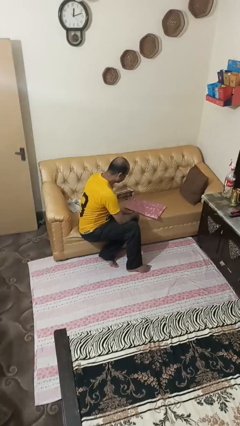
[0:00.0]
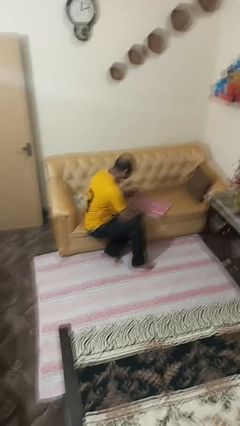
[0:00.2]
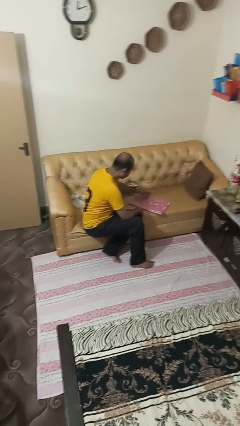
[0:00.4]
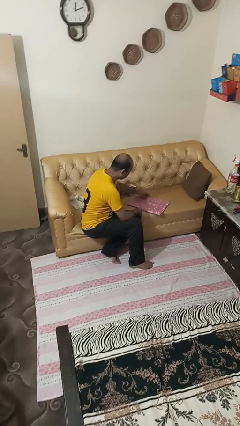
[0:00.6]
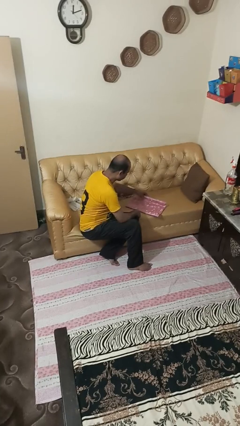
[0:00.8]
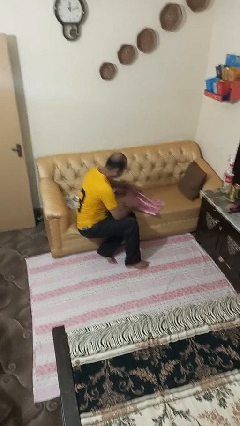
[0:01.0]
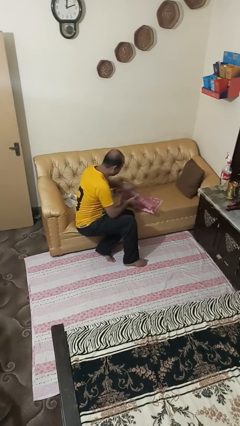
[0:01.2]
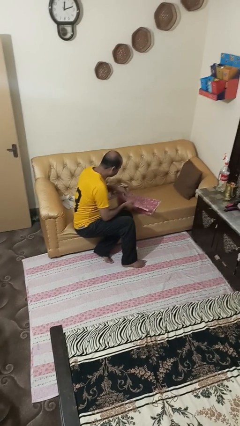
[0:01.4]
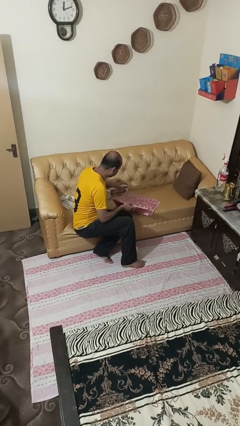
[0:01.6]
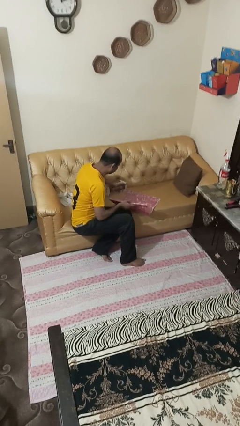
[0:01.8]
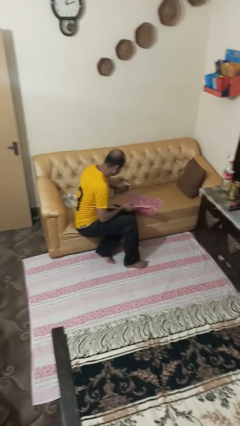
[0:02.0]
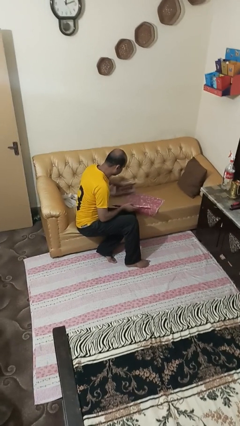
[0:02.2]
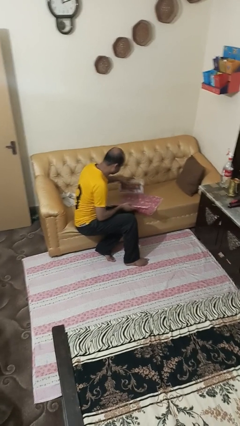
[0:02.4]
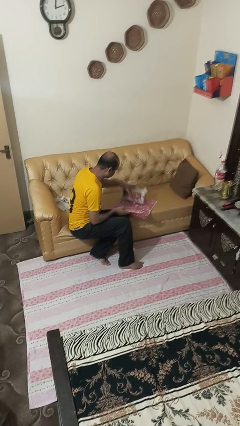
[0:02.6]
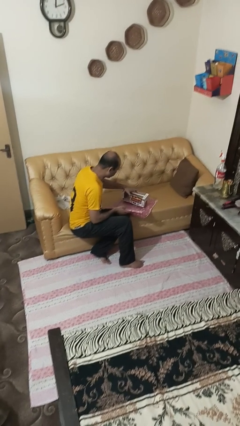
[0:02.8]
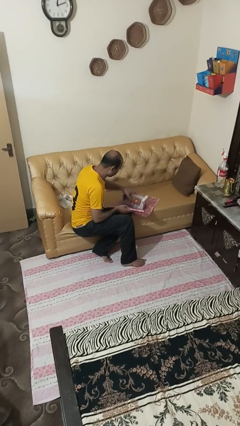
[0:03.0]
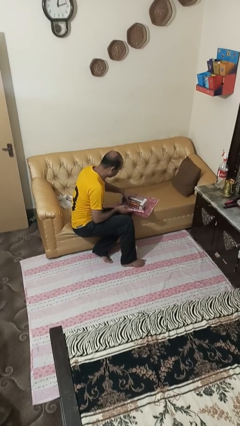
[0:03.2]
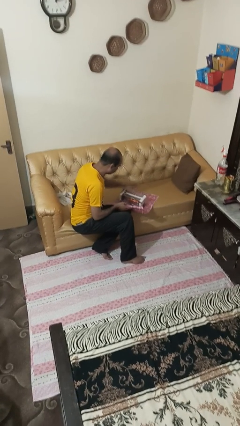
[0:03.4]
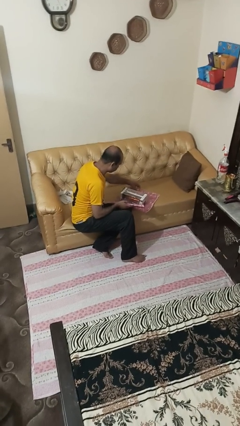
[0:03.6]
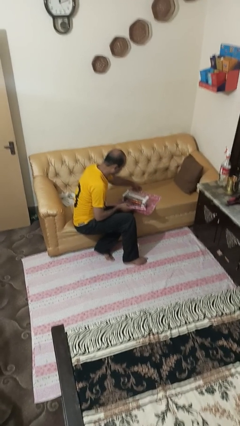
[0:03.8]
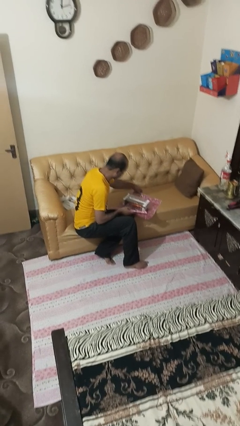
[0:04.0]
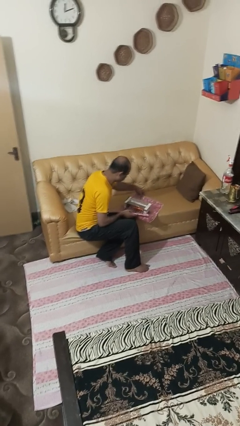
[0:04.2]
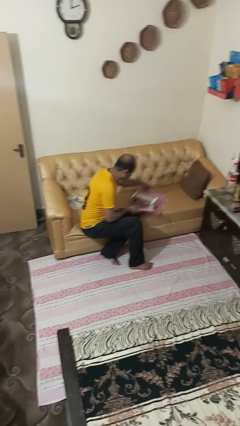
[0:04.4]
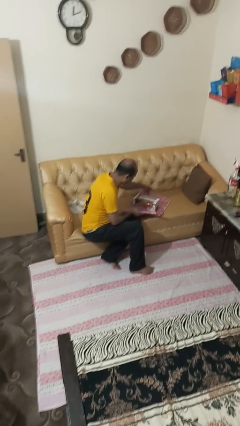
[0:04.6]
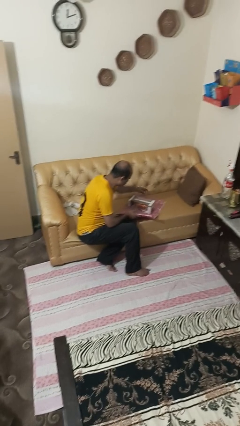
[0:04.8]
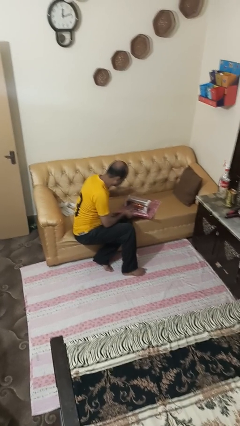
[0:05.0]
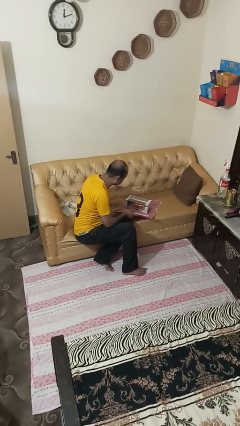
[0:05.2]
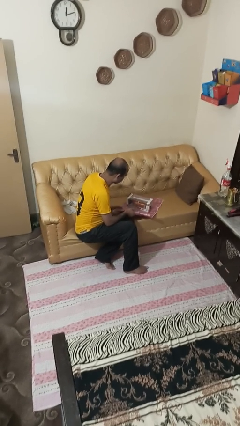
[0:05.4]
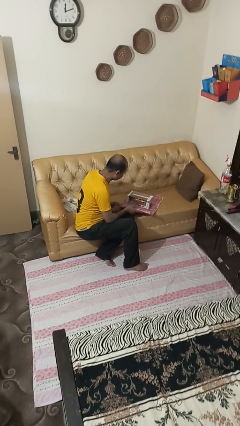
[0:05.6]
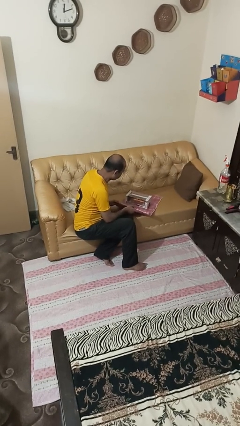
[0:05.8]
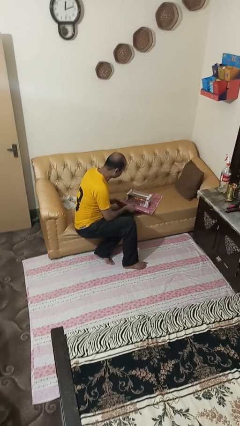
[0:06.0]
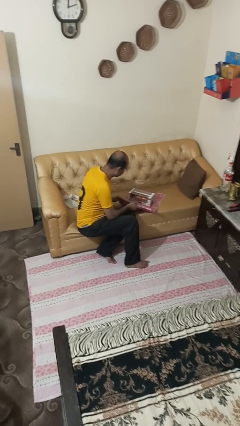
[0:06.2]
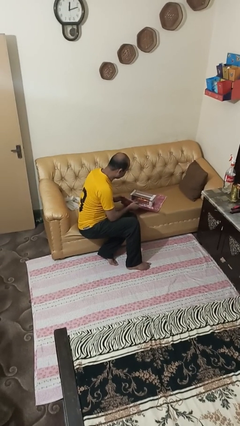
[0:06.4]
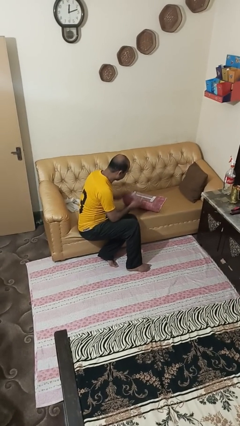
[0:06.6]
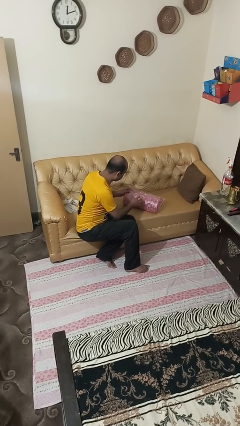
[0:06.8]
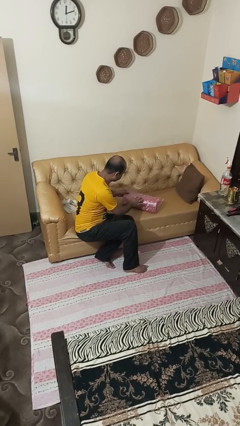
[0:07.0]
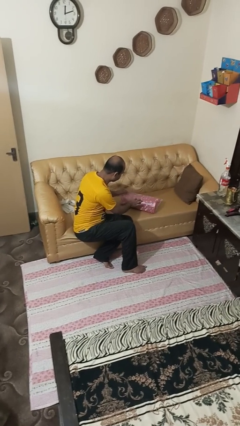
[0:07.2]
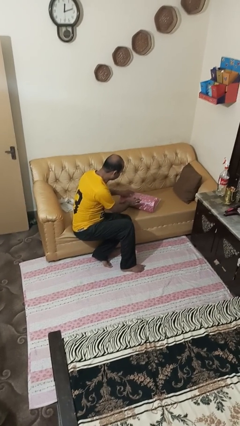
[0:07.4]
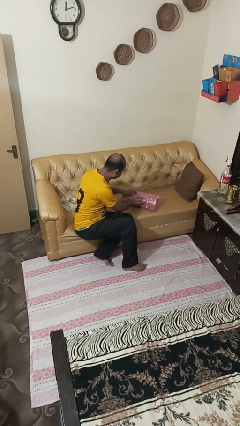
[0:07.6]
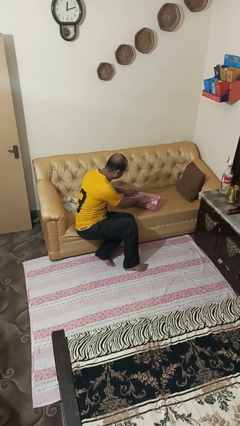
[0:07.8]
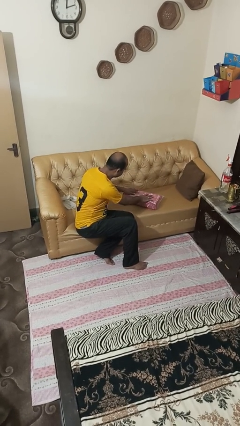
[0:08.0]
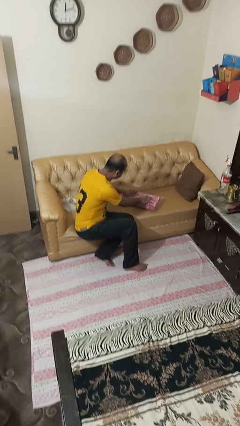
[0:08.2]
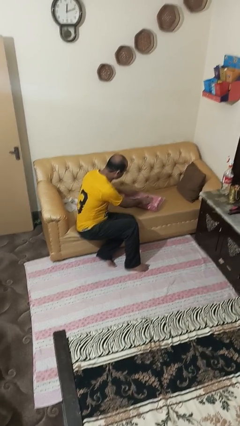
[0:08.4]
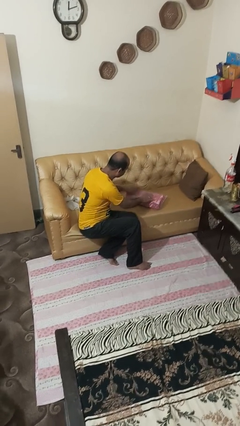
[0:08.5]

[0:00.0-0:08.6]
person wraps box

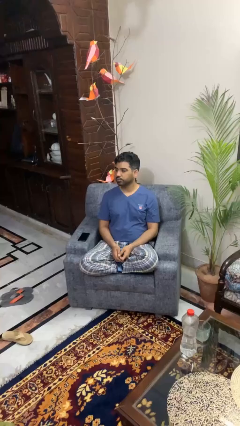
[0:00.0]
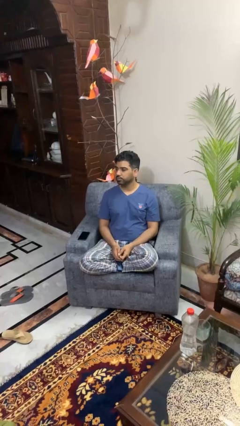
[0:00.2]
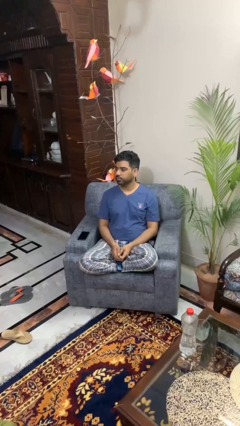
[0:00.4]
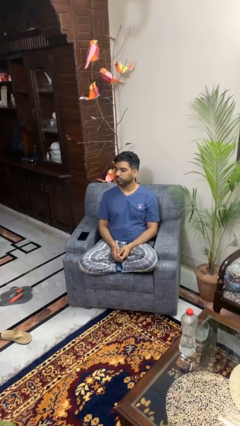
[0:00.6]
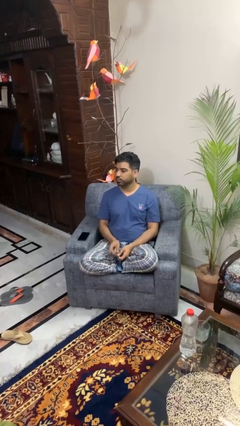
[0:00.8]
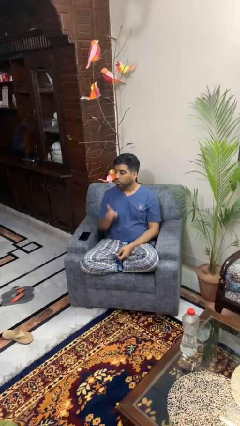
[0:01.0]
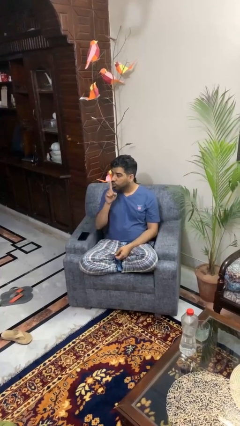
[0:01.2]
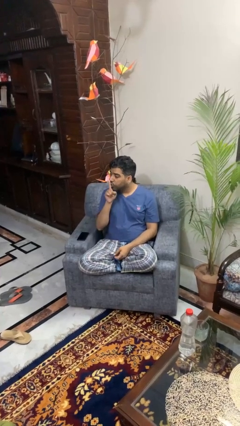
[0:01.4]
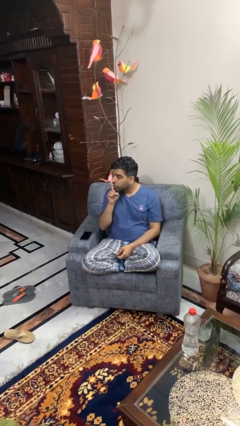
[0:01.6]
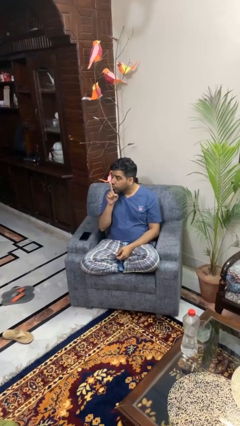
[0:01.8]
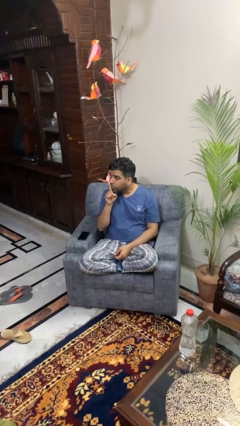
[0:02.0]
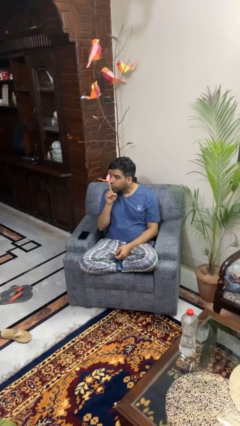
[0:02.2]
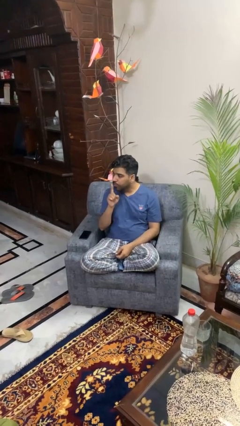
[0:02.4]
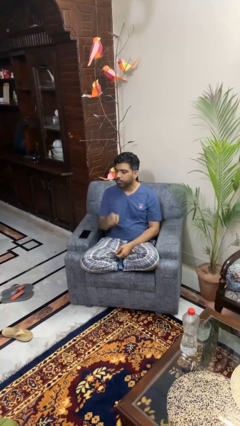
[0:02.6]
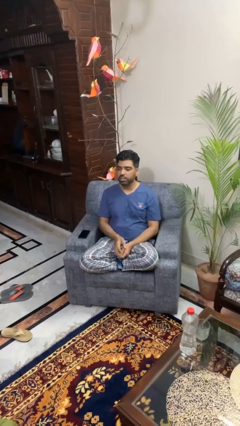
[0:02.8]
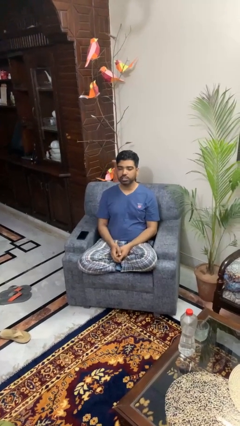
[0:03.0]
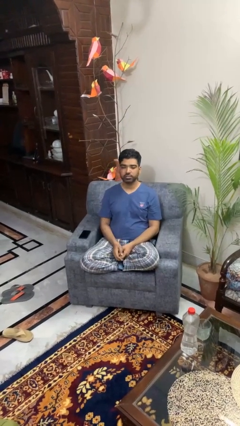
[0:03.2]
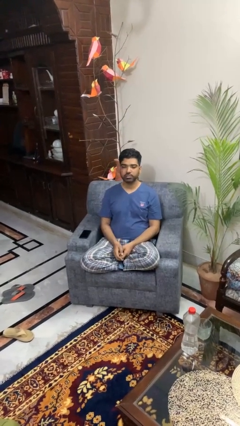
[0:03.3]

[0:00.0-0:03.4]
person gestures be quiet

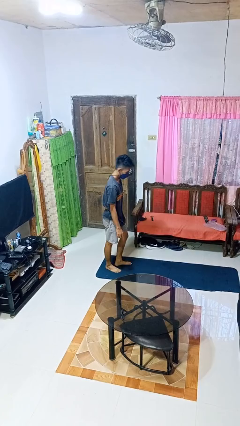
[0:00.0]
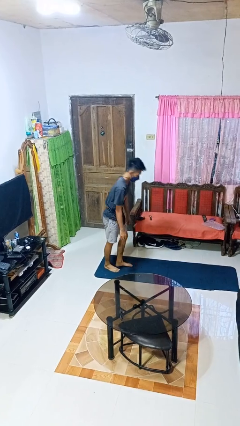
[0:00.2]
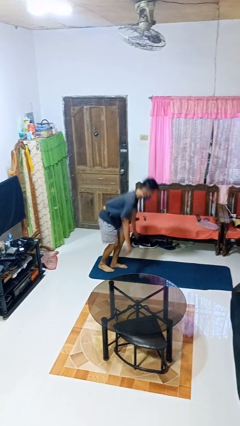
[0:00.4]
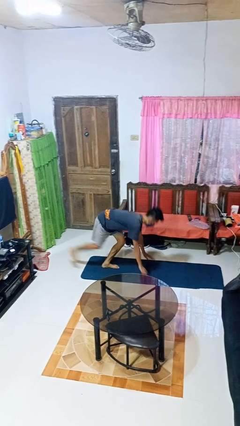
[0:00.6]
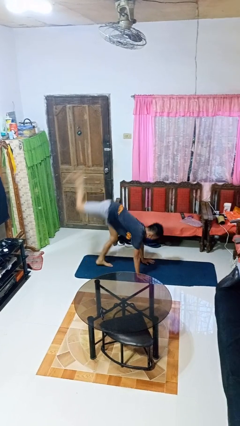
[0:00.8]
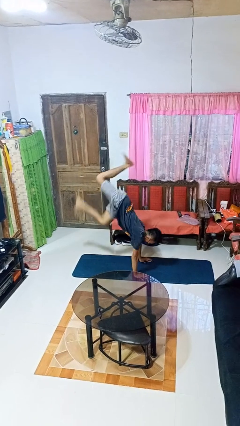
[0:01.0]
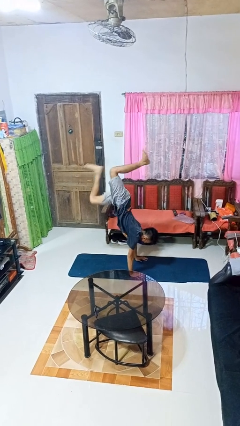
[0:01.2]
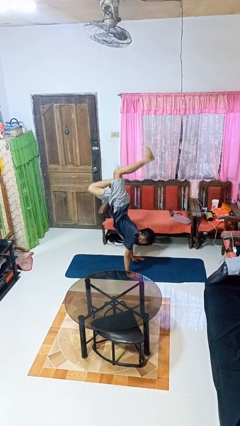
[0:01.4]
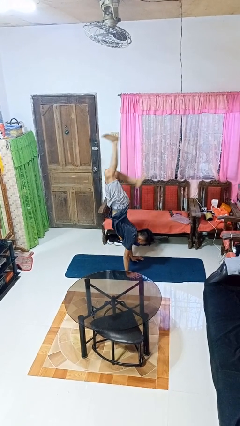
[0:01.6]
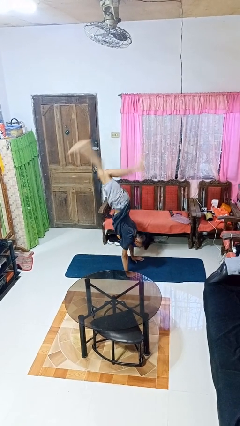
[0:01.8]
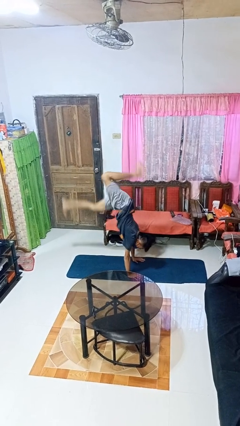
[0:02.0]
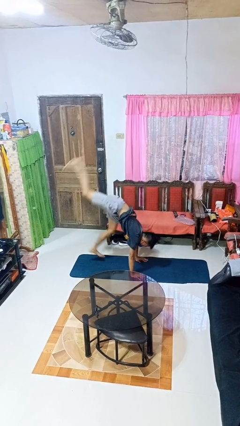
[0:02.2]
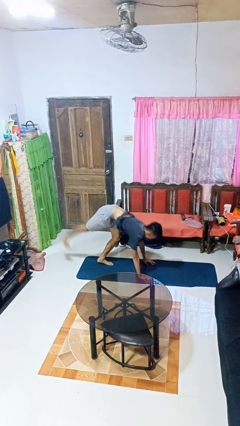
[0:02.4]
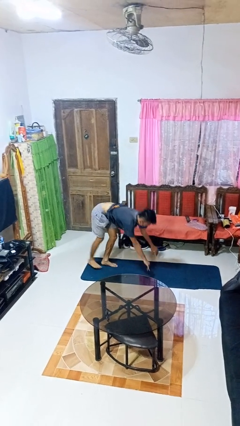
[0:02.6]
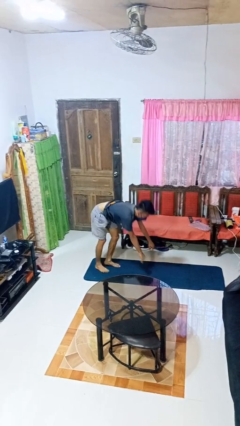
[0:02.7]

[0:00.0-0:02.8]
person handstand

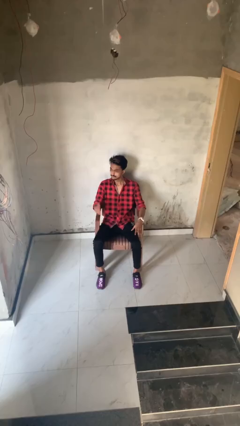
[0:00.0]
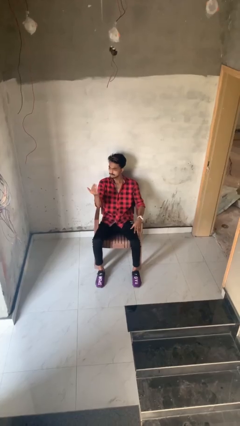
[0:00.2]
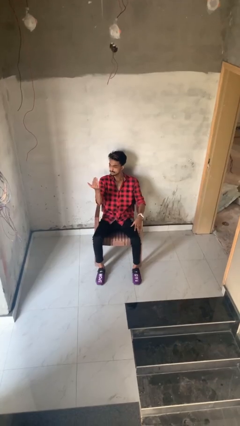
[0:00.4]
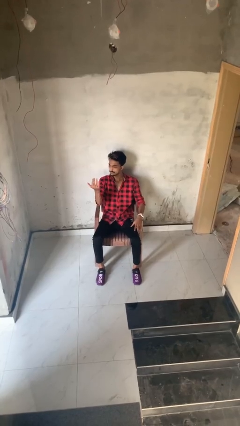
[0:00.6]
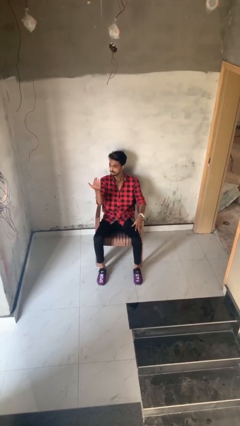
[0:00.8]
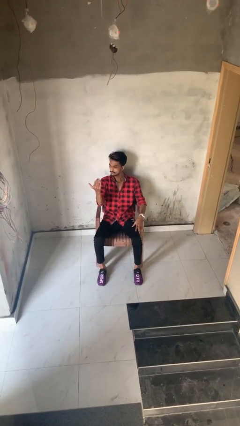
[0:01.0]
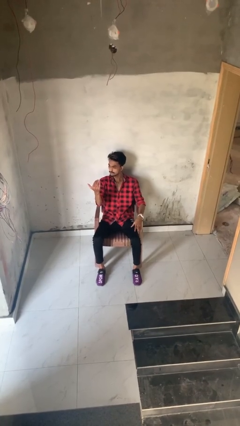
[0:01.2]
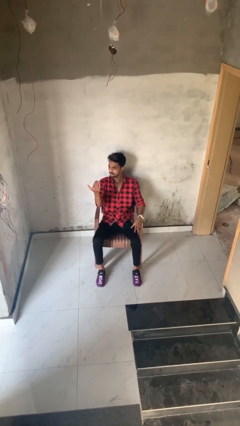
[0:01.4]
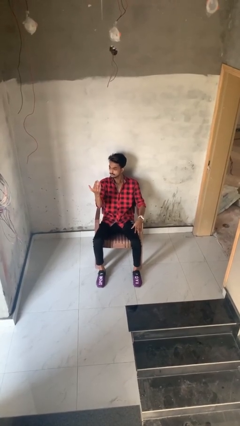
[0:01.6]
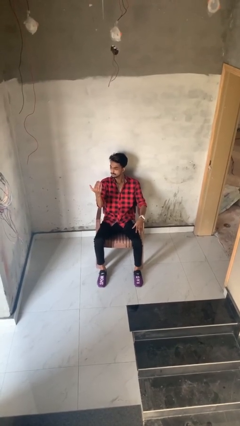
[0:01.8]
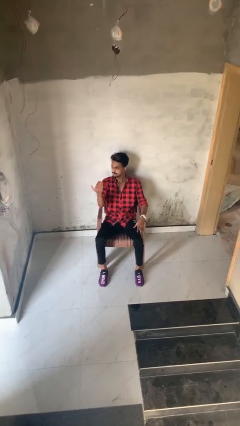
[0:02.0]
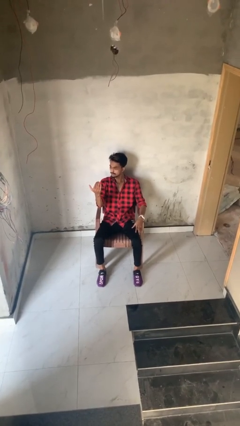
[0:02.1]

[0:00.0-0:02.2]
person gestures come here

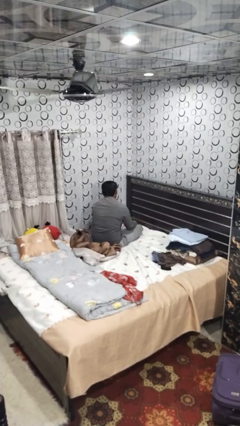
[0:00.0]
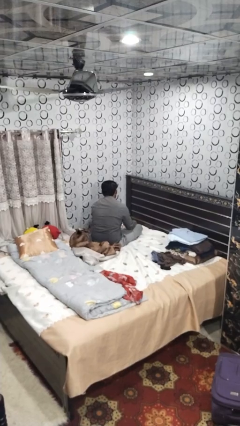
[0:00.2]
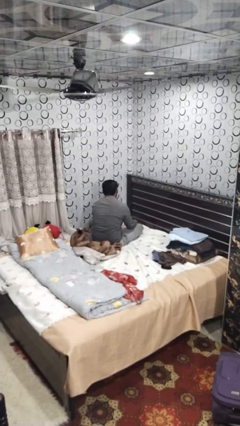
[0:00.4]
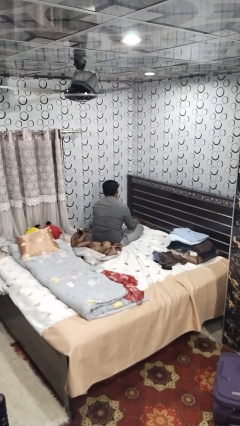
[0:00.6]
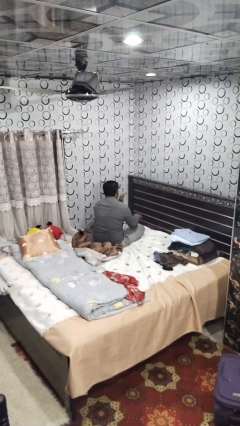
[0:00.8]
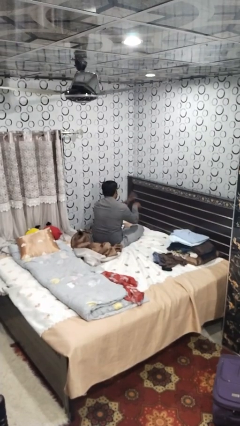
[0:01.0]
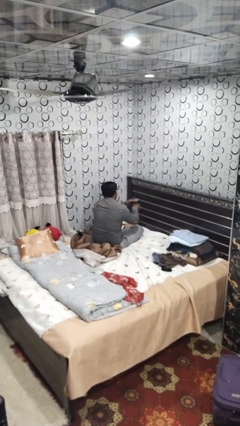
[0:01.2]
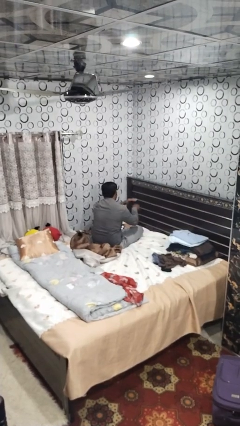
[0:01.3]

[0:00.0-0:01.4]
person swats bug
